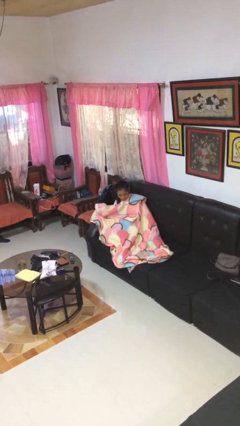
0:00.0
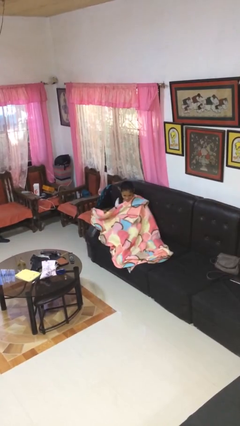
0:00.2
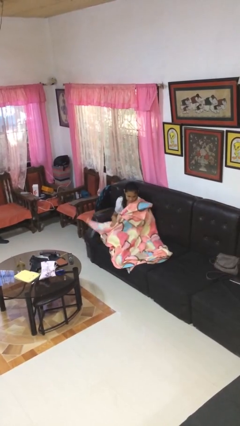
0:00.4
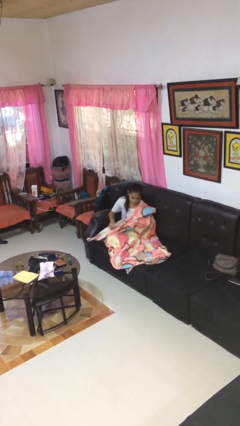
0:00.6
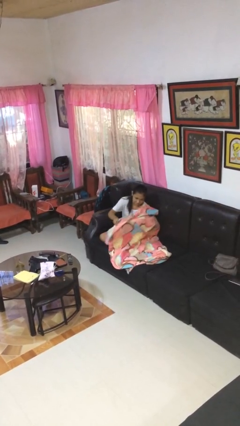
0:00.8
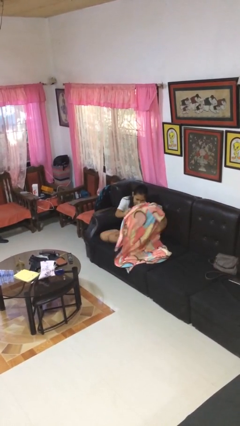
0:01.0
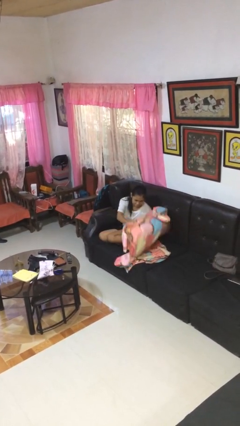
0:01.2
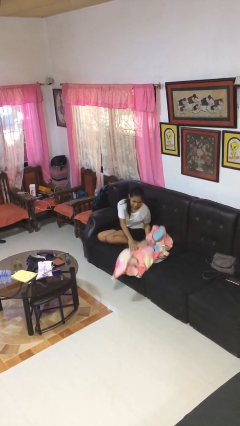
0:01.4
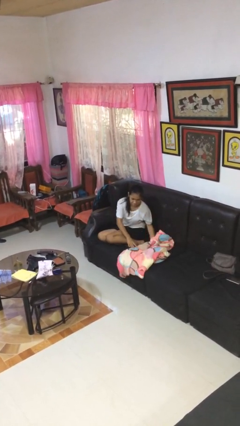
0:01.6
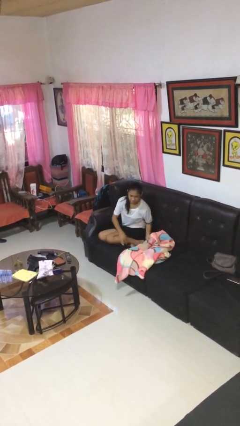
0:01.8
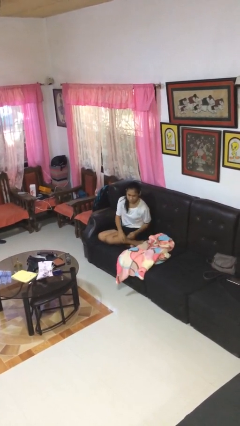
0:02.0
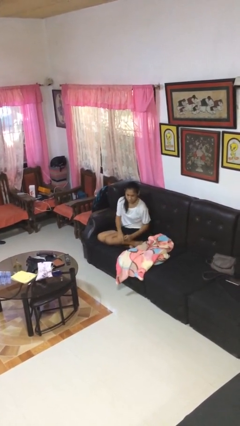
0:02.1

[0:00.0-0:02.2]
person uncovers with blanket

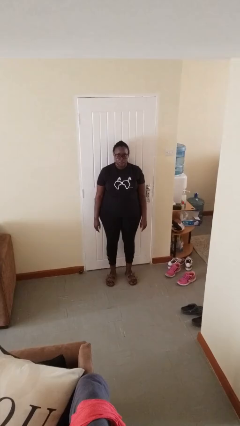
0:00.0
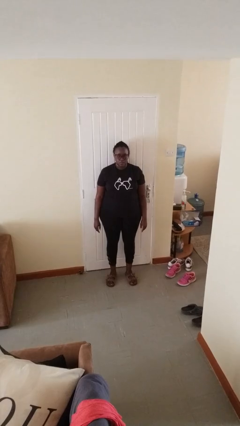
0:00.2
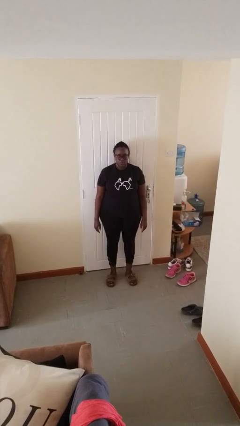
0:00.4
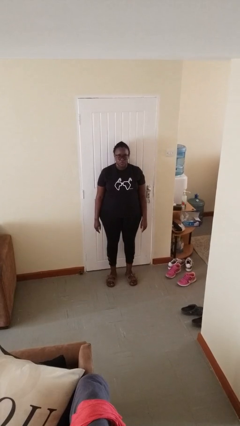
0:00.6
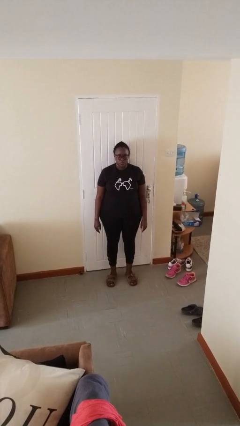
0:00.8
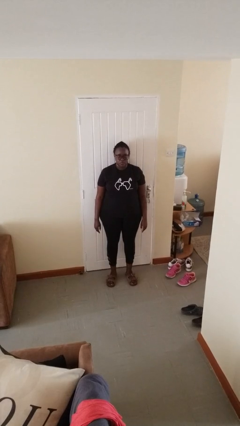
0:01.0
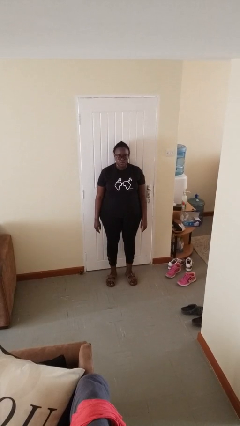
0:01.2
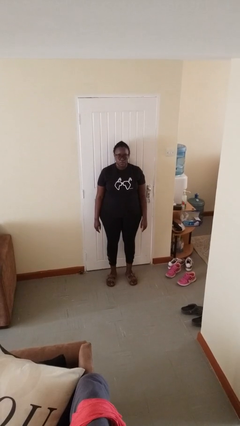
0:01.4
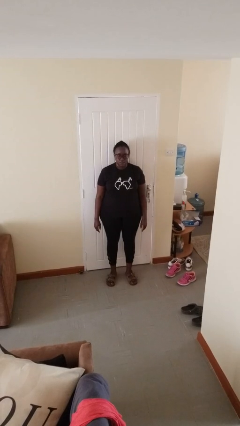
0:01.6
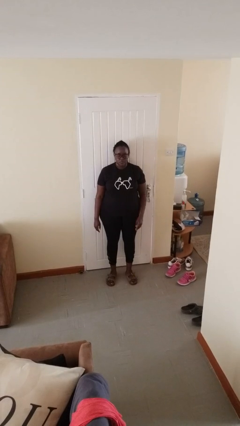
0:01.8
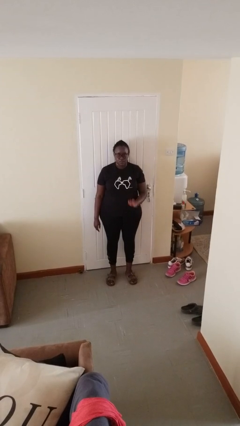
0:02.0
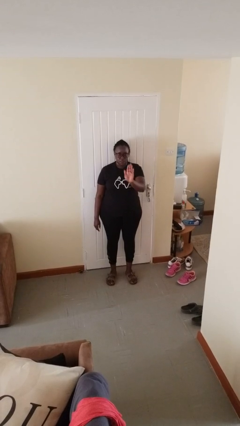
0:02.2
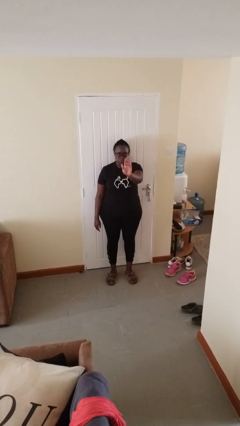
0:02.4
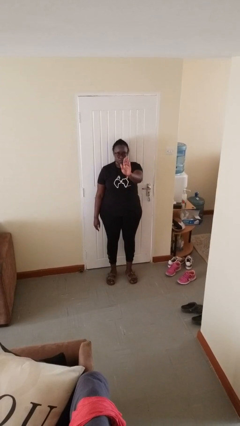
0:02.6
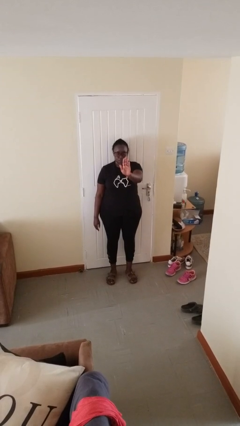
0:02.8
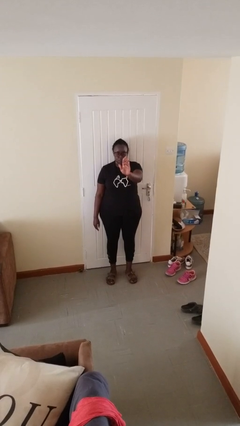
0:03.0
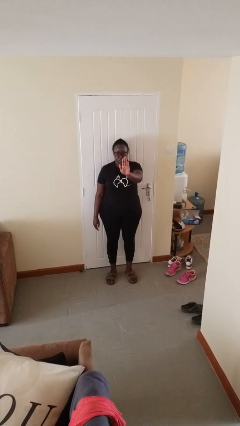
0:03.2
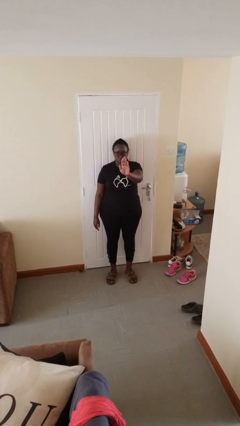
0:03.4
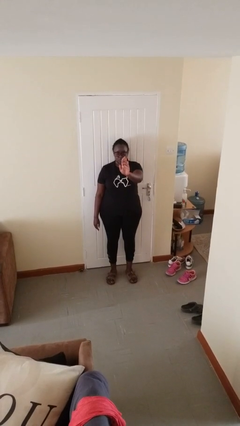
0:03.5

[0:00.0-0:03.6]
person gestures stop

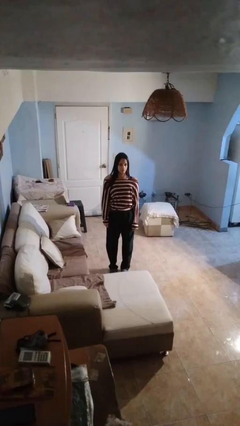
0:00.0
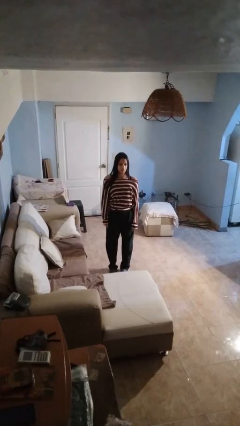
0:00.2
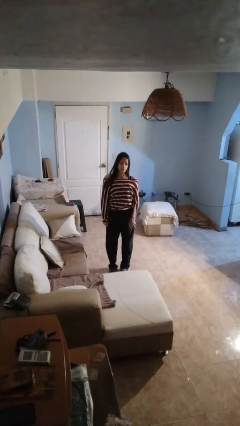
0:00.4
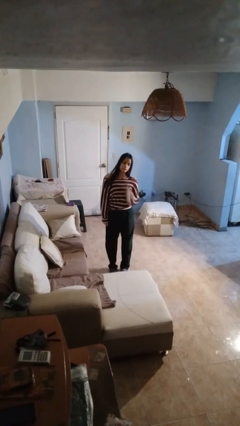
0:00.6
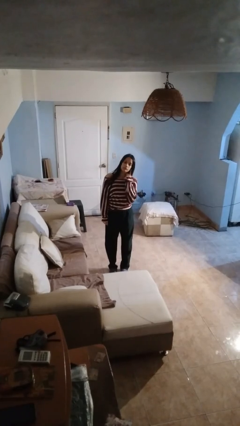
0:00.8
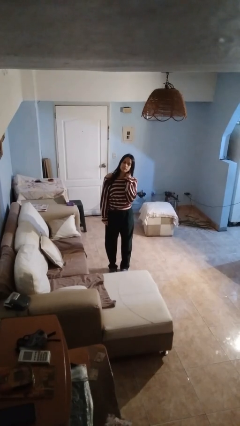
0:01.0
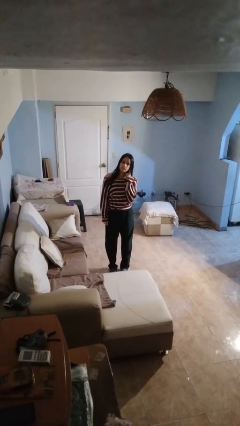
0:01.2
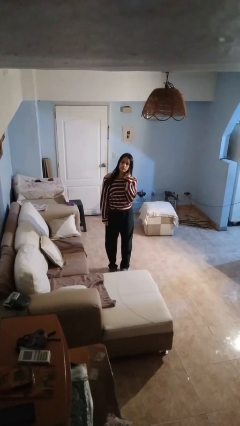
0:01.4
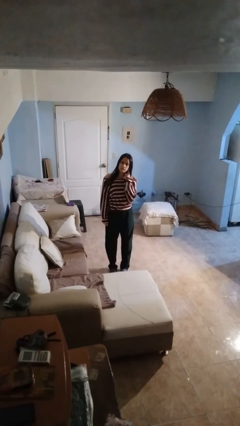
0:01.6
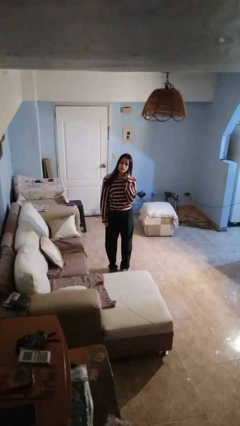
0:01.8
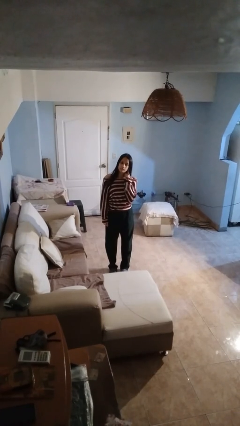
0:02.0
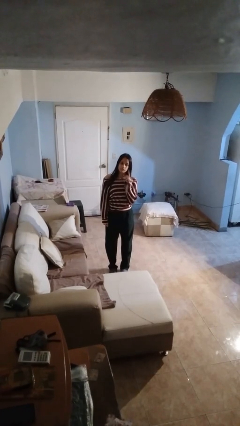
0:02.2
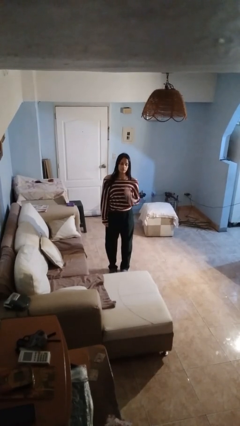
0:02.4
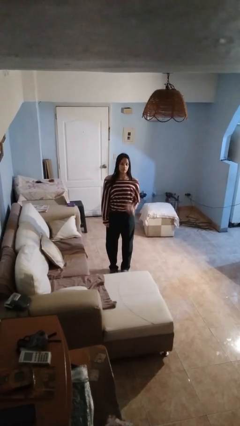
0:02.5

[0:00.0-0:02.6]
person gestures listen closely

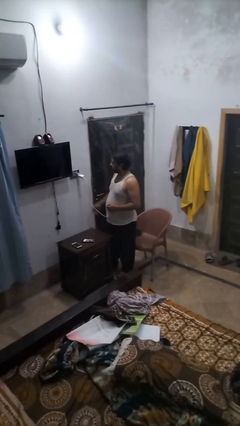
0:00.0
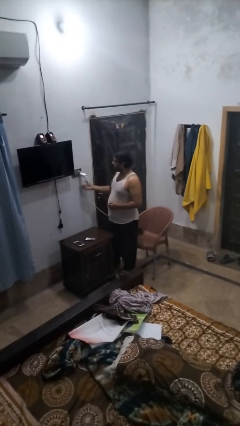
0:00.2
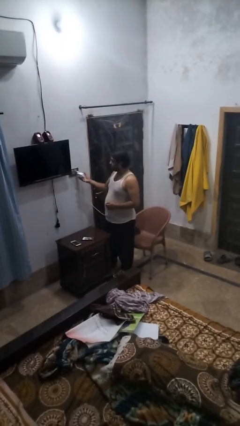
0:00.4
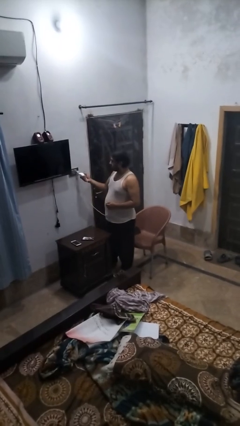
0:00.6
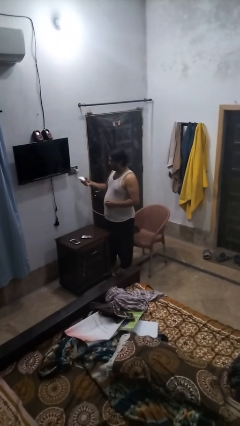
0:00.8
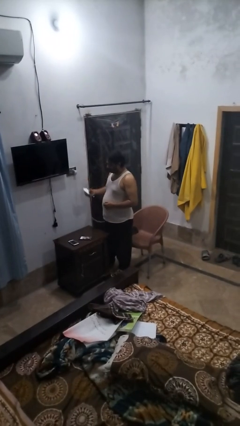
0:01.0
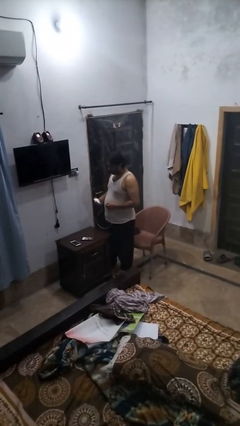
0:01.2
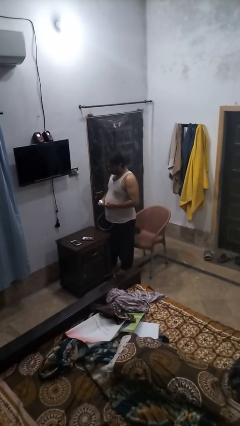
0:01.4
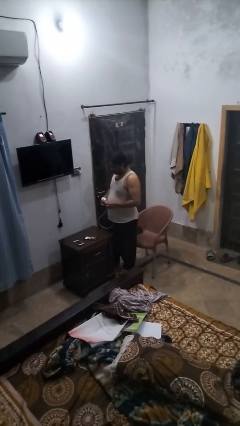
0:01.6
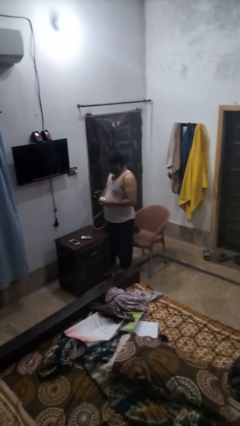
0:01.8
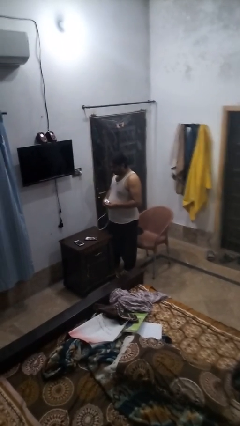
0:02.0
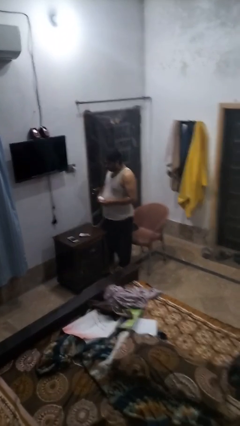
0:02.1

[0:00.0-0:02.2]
person unplugs from electrical socket

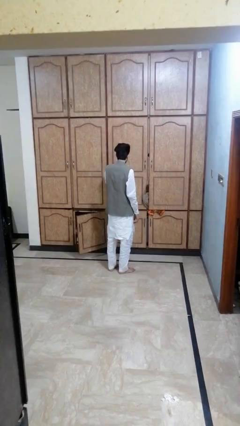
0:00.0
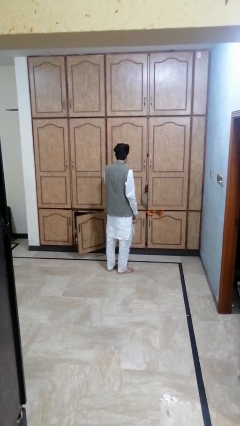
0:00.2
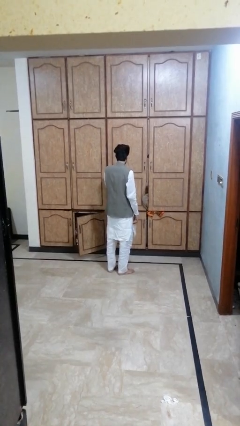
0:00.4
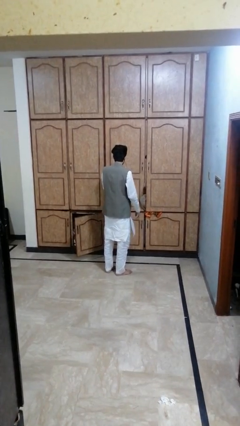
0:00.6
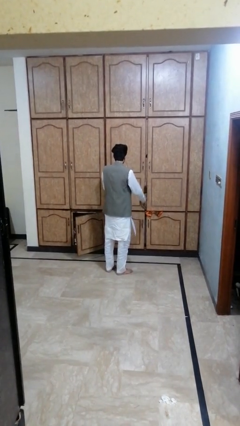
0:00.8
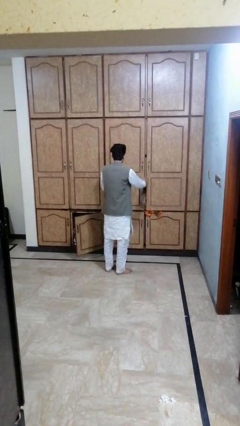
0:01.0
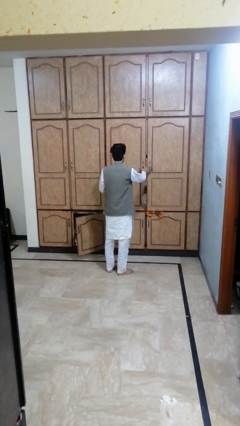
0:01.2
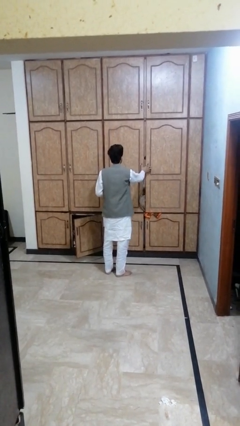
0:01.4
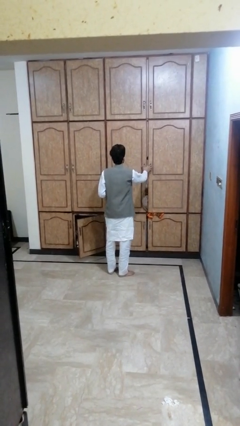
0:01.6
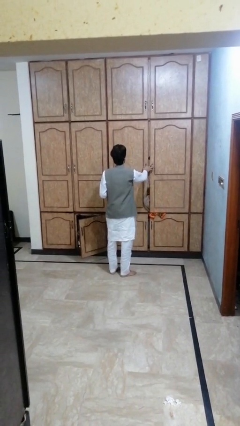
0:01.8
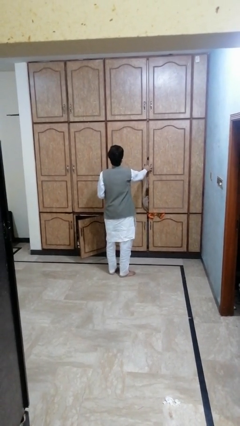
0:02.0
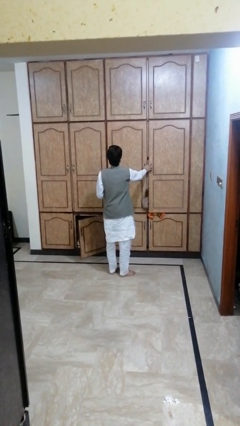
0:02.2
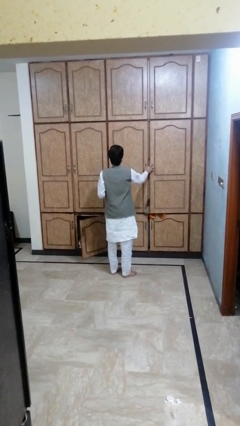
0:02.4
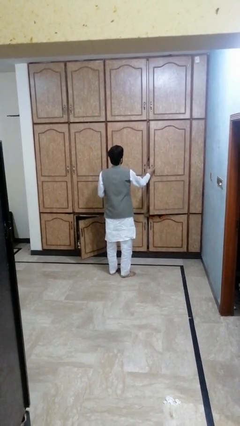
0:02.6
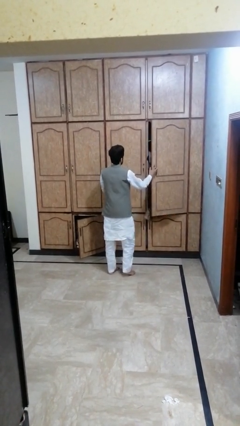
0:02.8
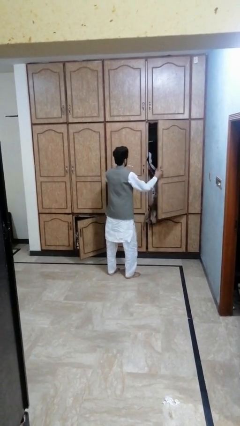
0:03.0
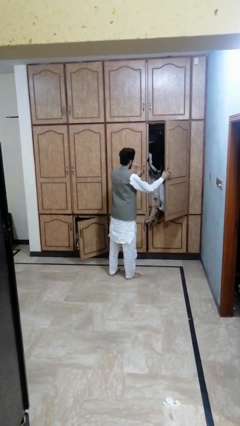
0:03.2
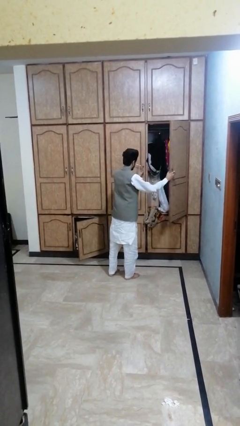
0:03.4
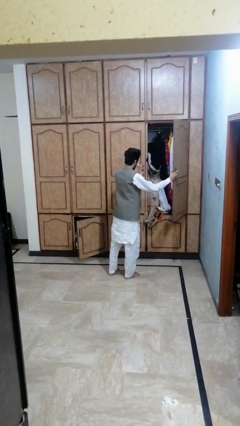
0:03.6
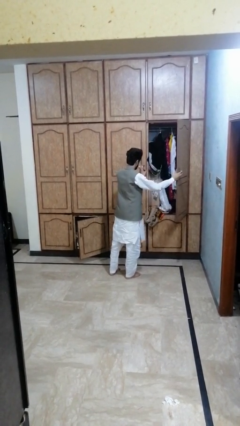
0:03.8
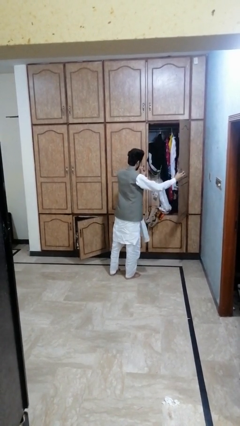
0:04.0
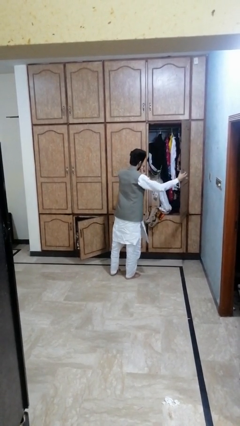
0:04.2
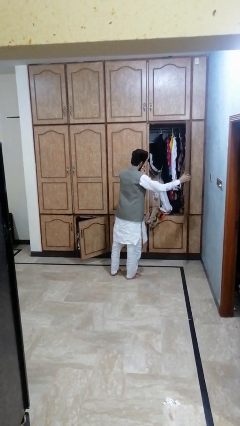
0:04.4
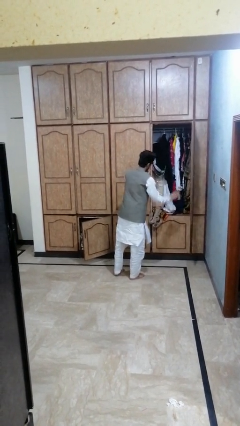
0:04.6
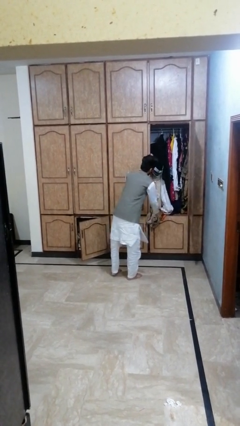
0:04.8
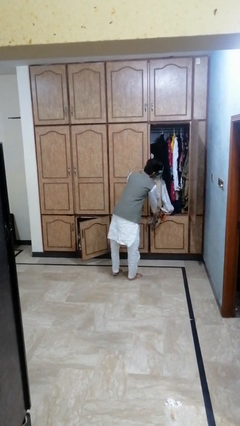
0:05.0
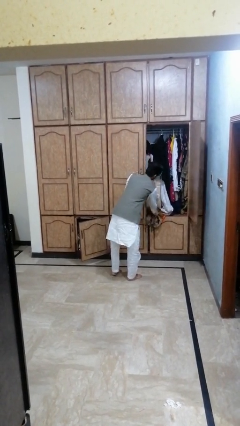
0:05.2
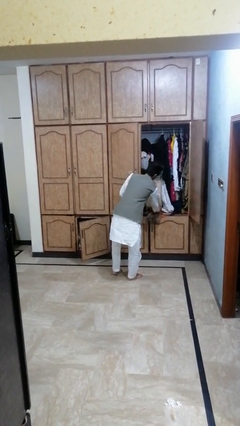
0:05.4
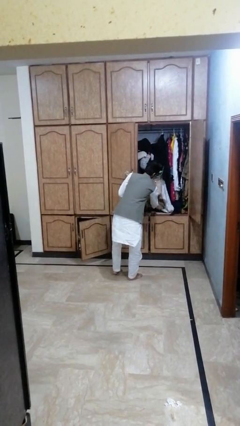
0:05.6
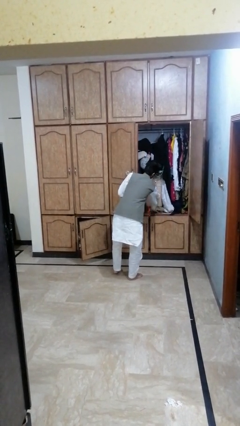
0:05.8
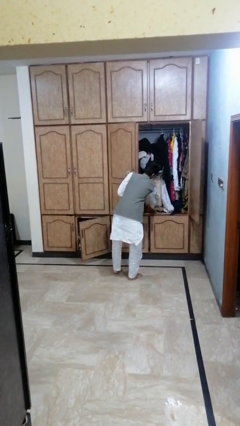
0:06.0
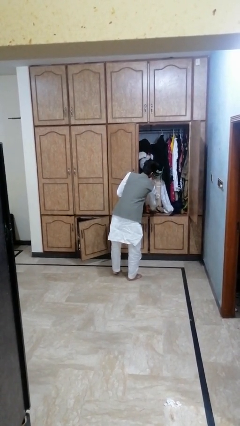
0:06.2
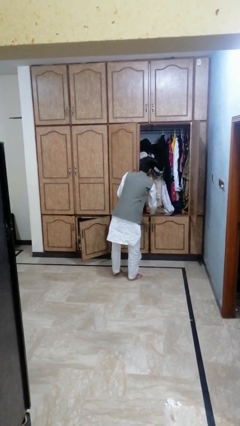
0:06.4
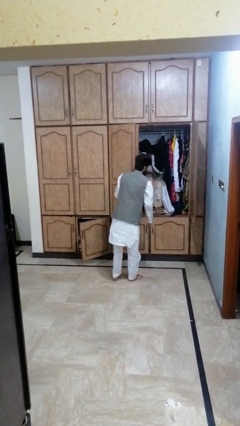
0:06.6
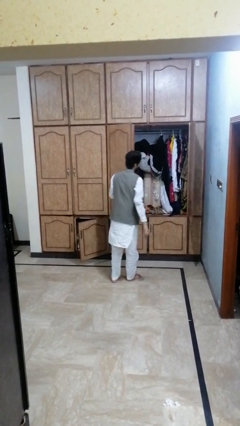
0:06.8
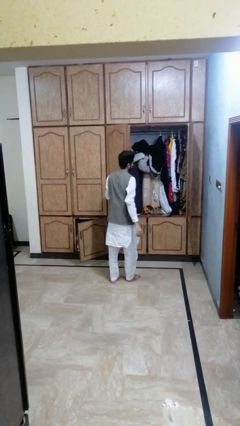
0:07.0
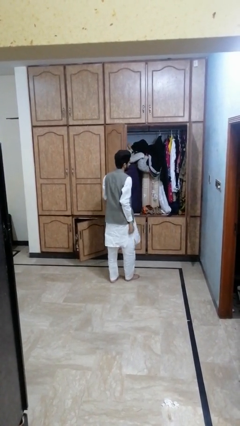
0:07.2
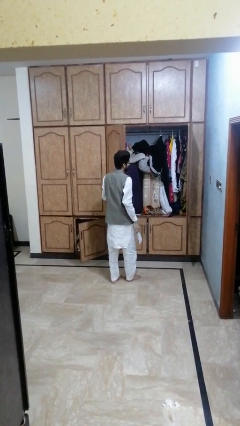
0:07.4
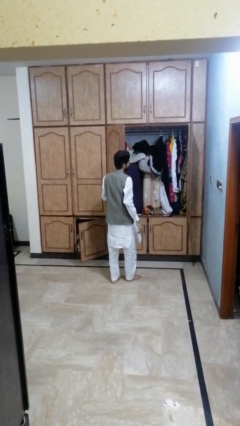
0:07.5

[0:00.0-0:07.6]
person opens dresser drawer
